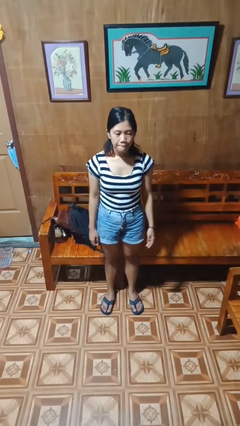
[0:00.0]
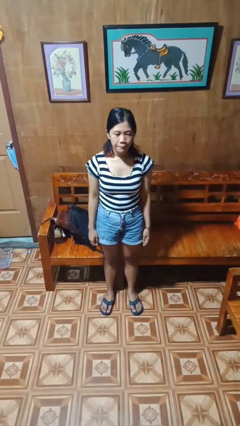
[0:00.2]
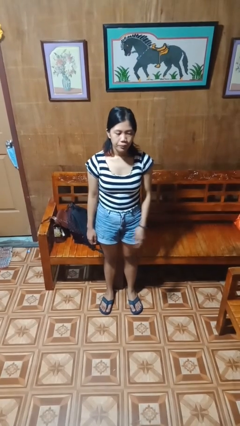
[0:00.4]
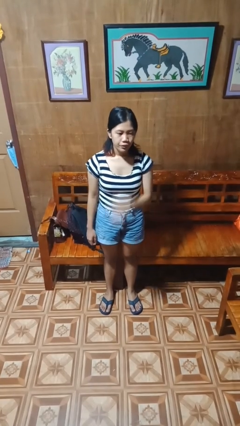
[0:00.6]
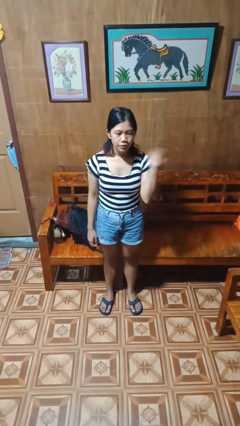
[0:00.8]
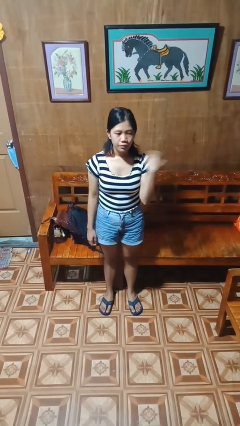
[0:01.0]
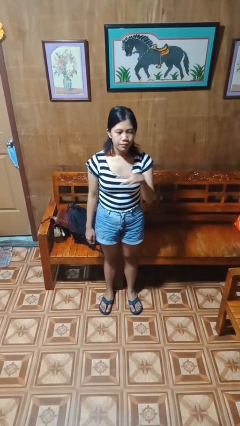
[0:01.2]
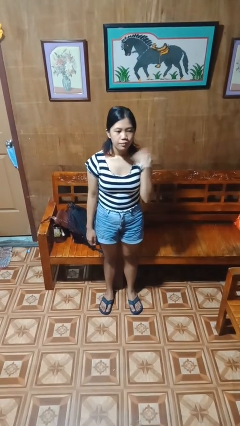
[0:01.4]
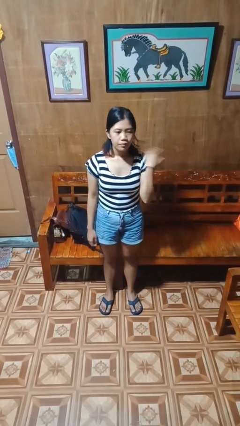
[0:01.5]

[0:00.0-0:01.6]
person gestures cut

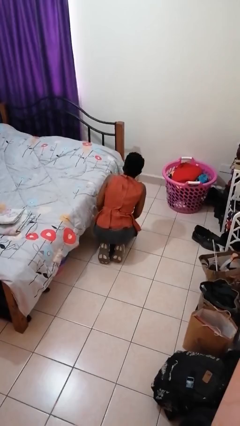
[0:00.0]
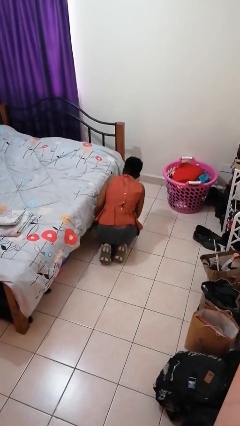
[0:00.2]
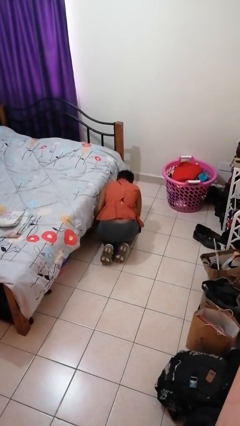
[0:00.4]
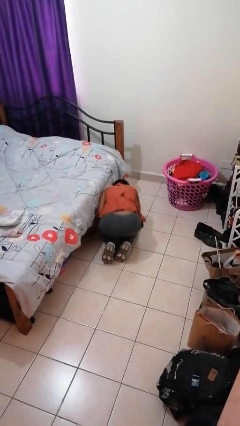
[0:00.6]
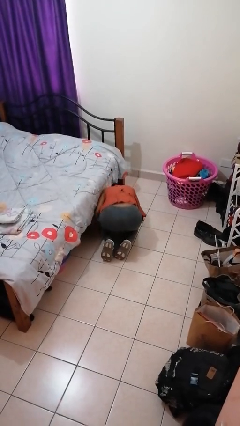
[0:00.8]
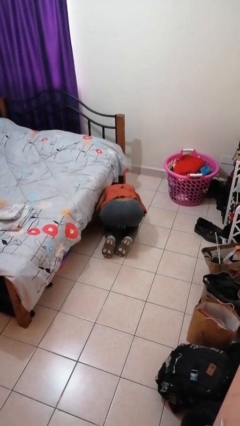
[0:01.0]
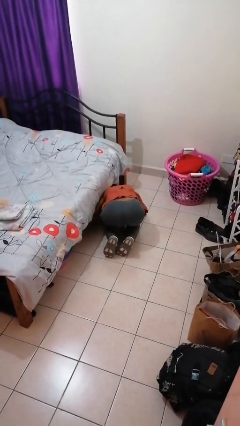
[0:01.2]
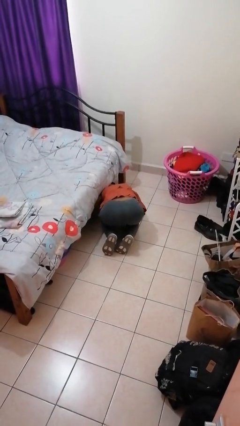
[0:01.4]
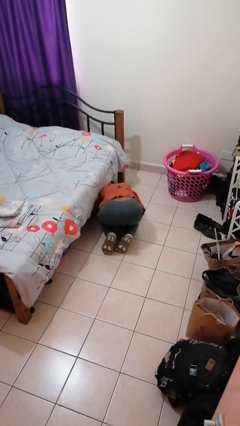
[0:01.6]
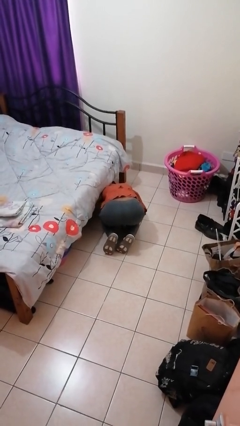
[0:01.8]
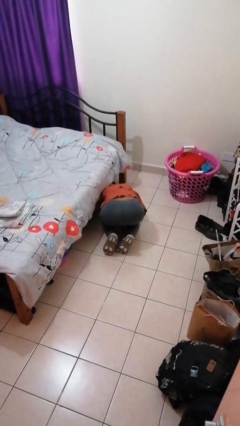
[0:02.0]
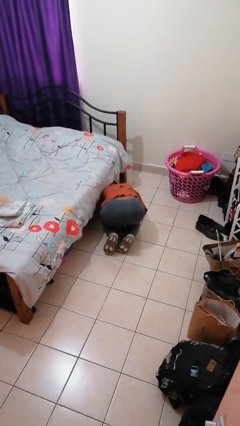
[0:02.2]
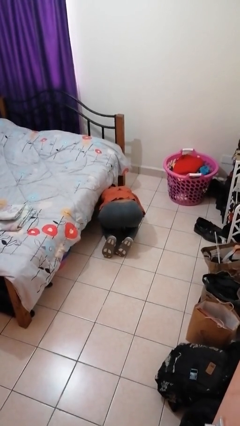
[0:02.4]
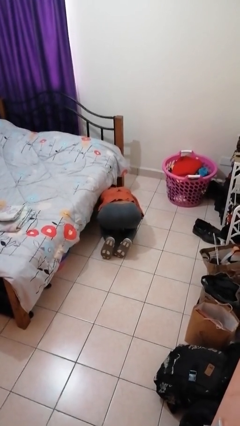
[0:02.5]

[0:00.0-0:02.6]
person searches under bed

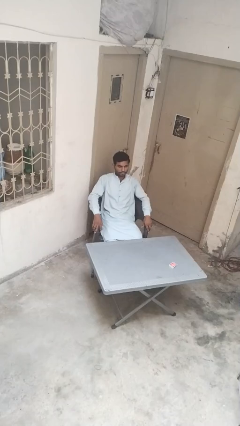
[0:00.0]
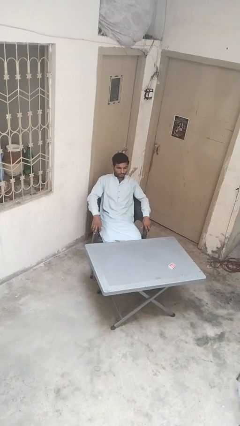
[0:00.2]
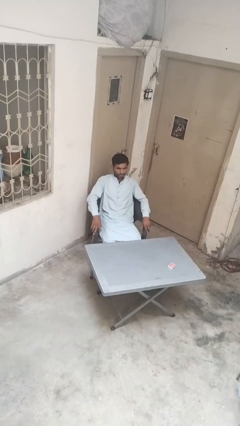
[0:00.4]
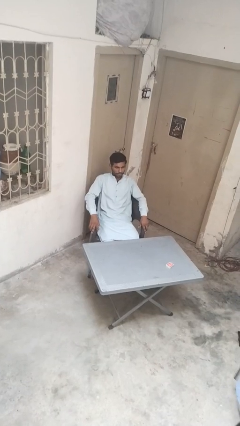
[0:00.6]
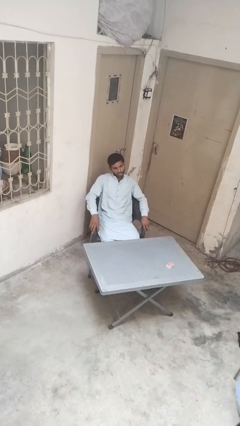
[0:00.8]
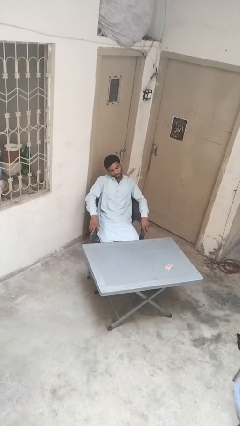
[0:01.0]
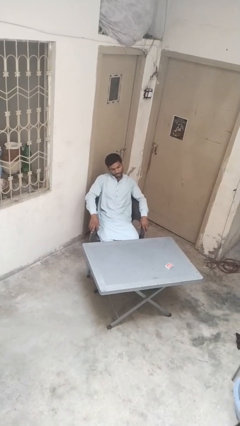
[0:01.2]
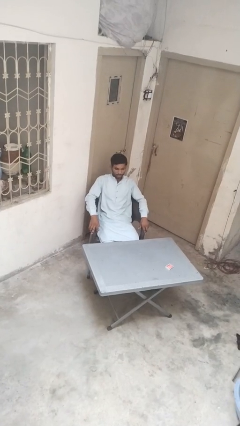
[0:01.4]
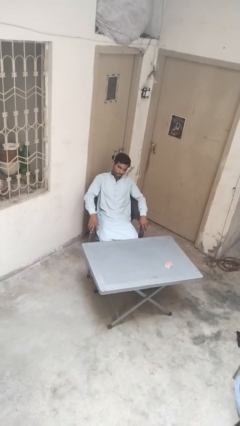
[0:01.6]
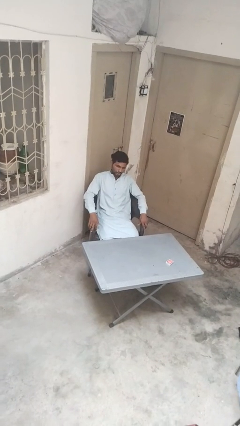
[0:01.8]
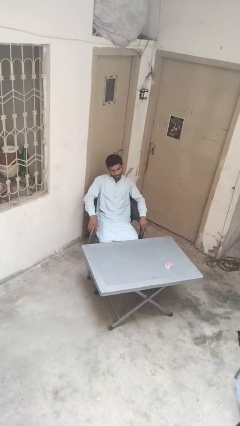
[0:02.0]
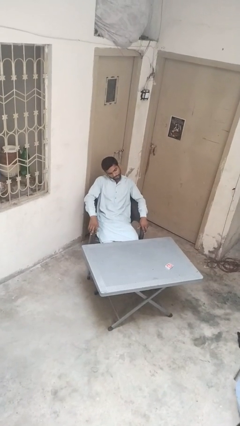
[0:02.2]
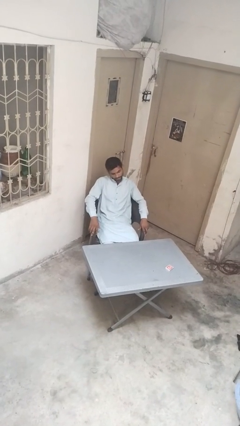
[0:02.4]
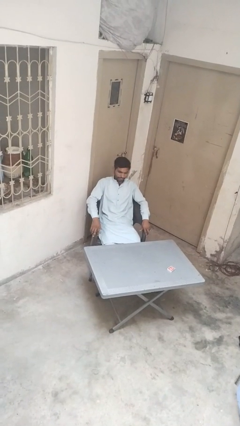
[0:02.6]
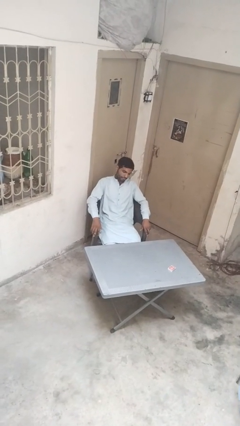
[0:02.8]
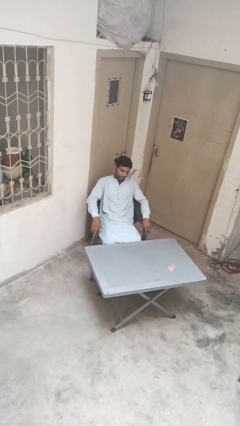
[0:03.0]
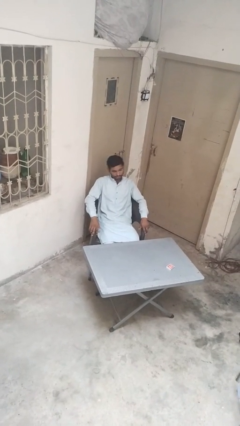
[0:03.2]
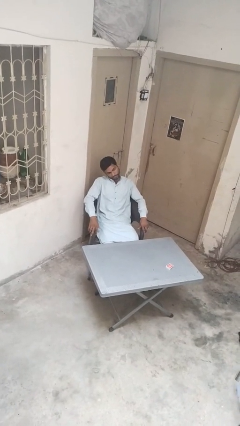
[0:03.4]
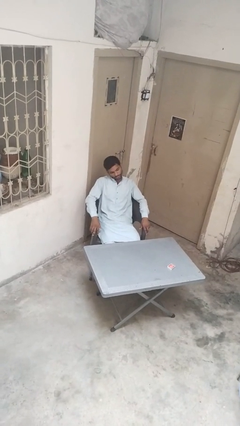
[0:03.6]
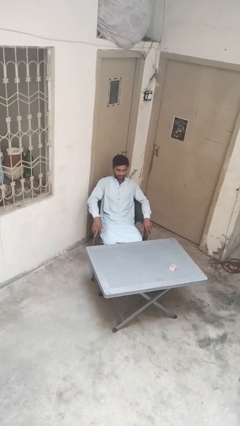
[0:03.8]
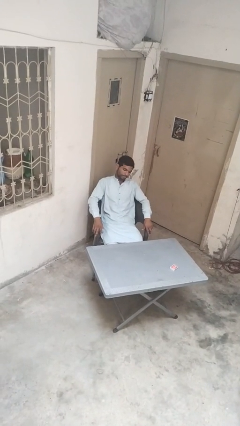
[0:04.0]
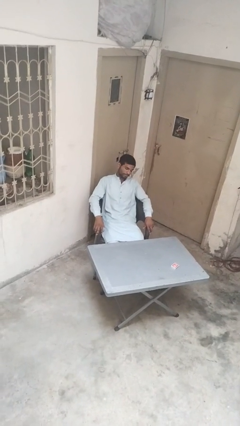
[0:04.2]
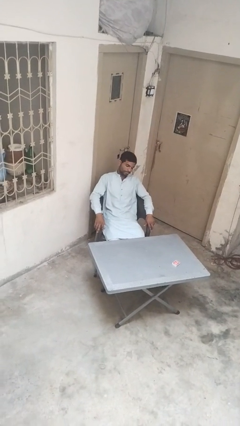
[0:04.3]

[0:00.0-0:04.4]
person shakes head

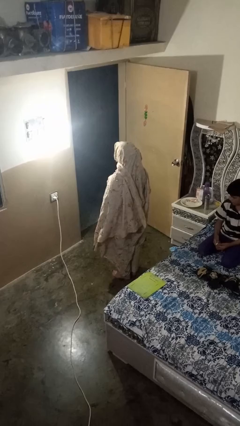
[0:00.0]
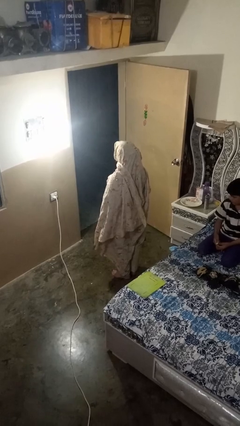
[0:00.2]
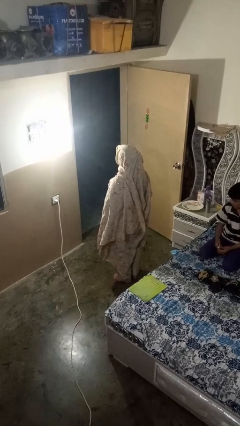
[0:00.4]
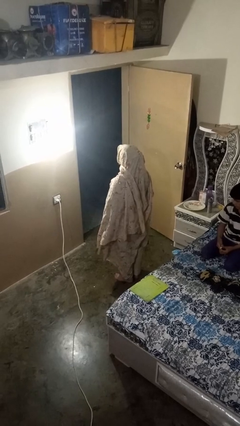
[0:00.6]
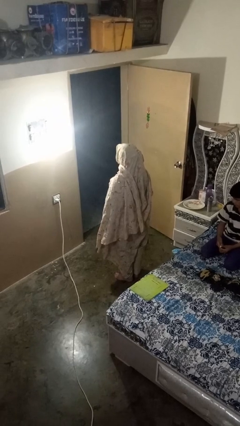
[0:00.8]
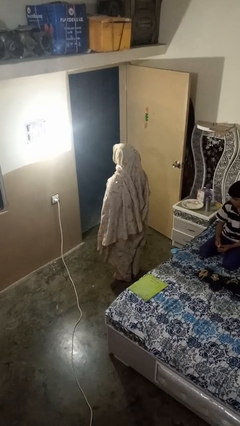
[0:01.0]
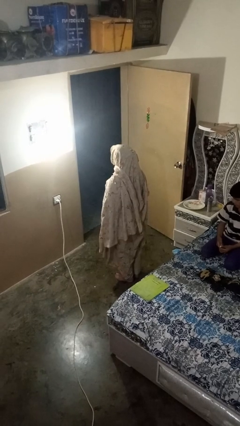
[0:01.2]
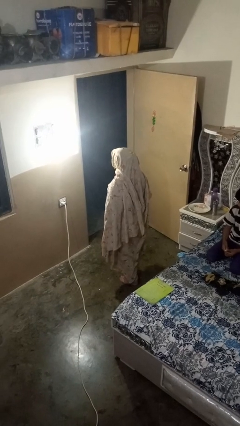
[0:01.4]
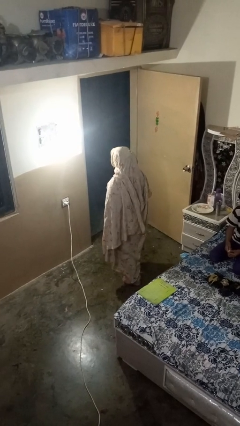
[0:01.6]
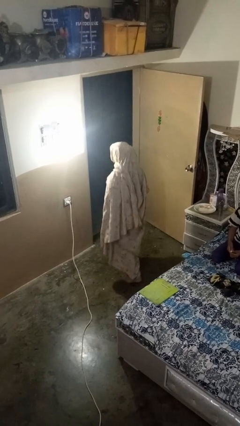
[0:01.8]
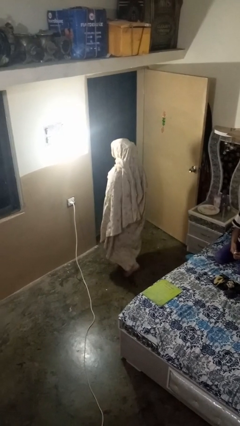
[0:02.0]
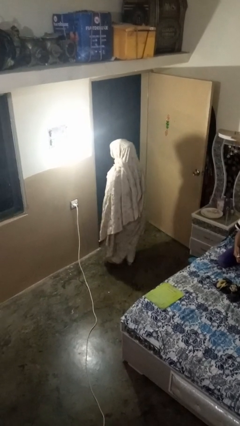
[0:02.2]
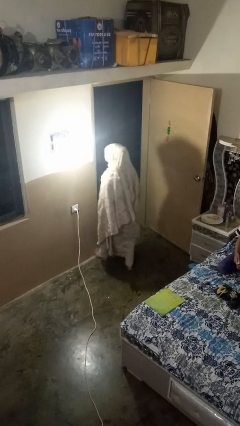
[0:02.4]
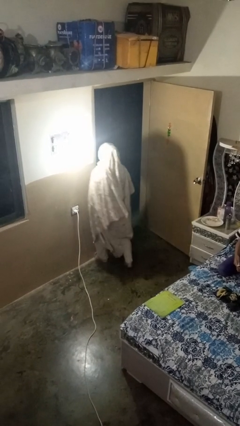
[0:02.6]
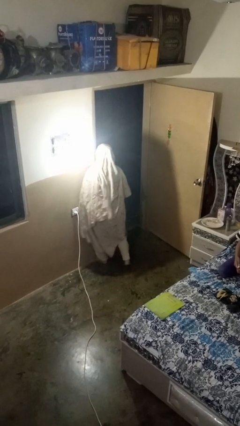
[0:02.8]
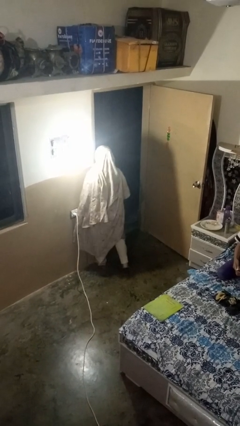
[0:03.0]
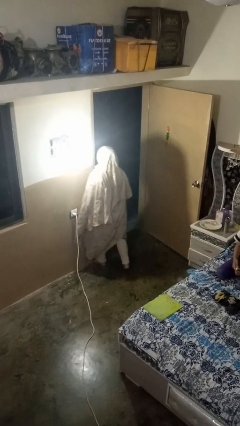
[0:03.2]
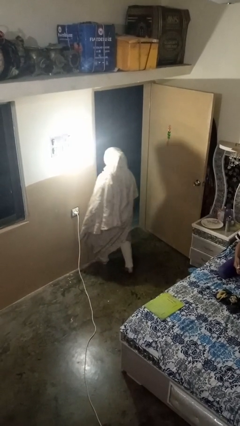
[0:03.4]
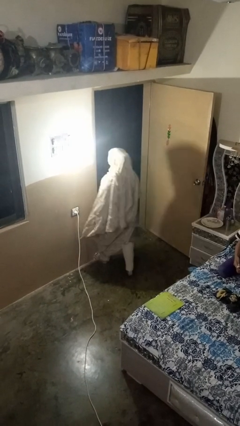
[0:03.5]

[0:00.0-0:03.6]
person bumps into wall

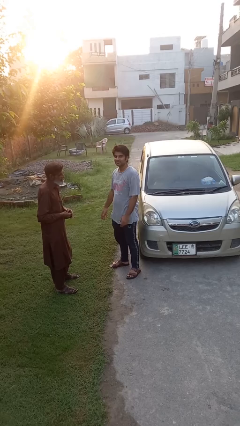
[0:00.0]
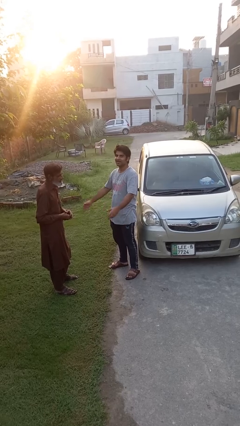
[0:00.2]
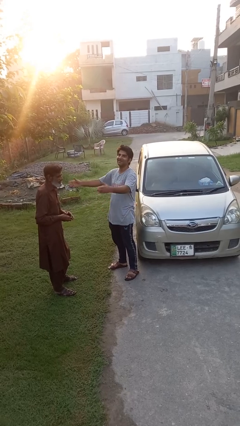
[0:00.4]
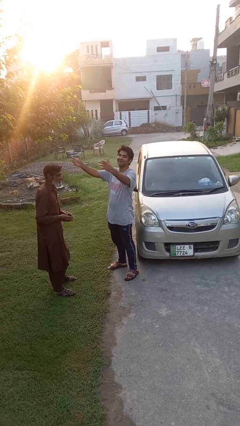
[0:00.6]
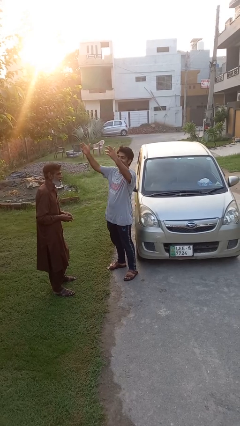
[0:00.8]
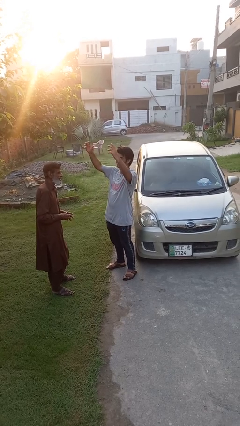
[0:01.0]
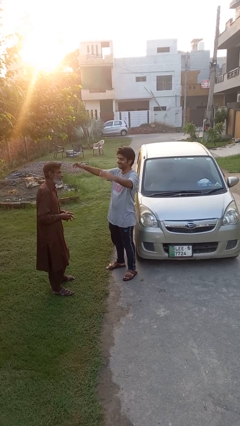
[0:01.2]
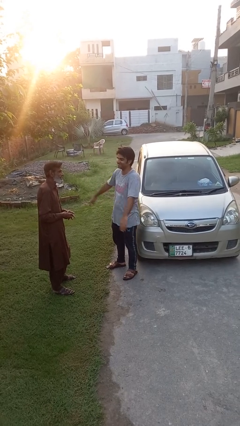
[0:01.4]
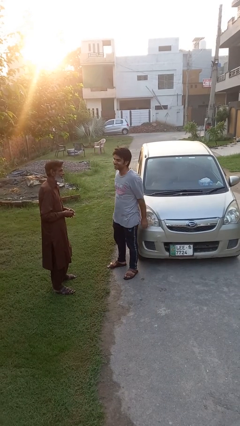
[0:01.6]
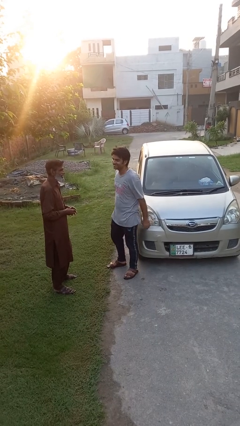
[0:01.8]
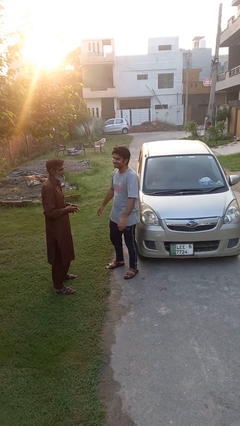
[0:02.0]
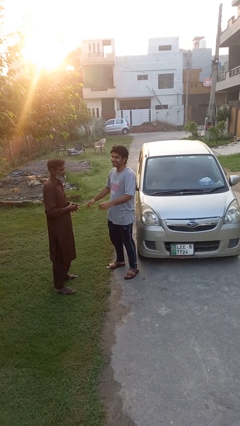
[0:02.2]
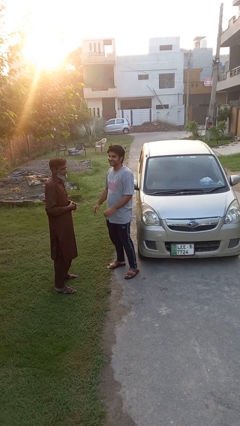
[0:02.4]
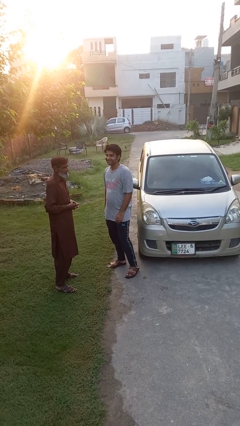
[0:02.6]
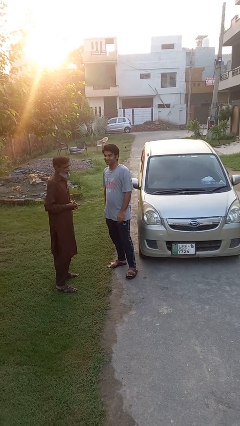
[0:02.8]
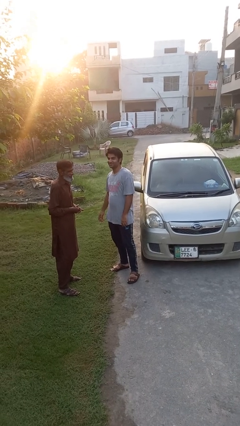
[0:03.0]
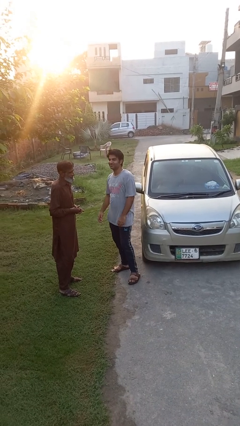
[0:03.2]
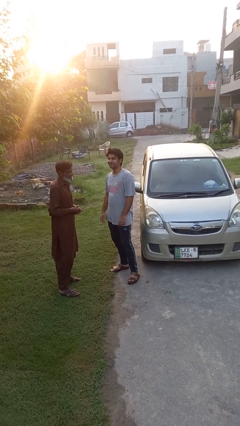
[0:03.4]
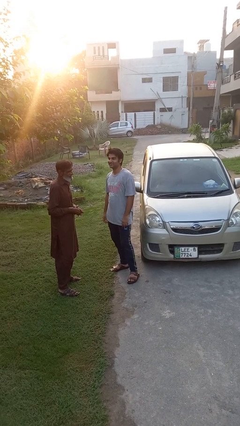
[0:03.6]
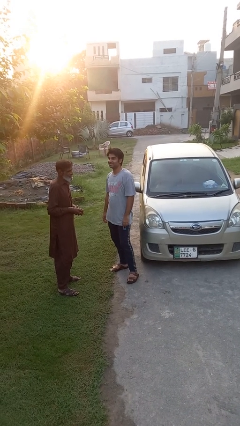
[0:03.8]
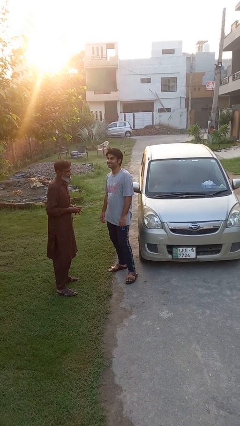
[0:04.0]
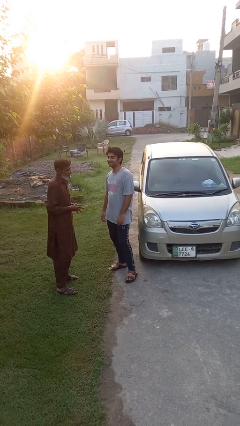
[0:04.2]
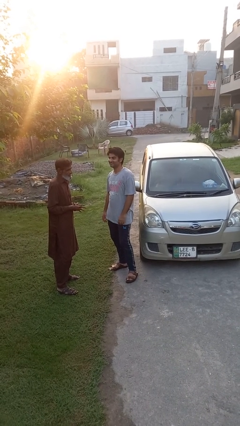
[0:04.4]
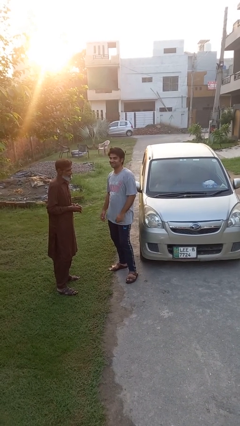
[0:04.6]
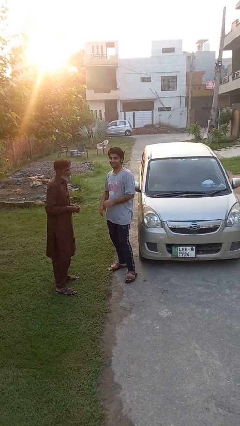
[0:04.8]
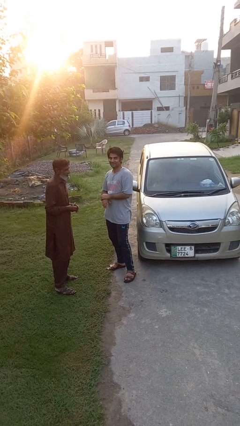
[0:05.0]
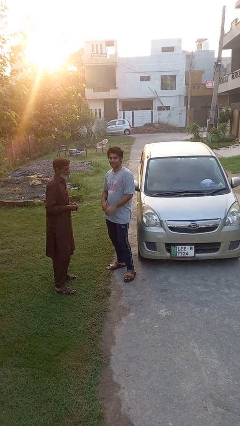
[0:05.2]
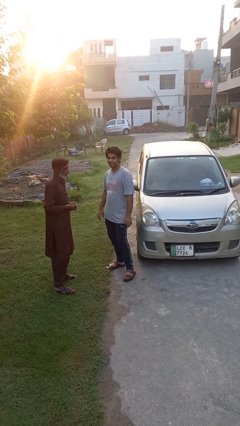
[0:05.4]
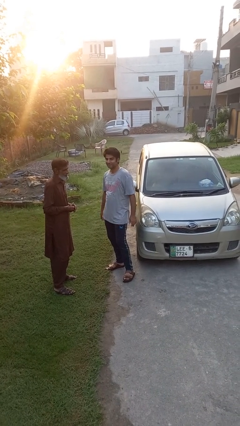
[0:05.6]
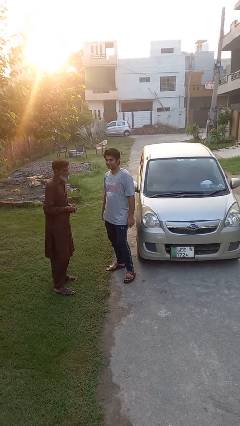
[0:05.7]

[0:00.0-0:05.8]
person laughs with person
